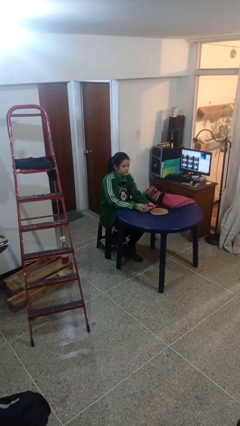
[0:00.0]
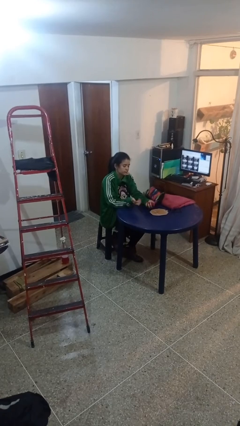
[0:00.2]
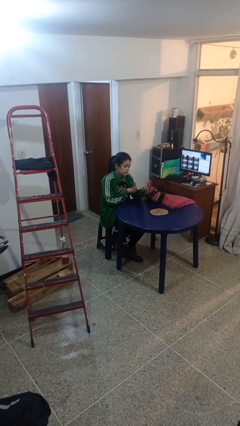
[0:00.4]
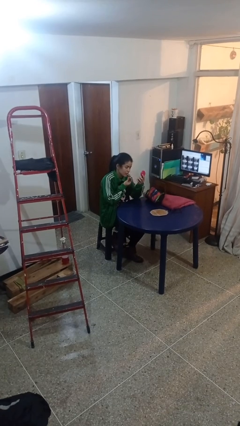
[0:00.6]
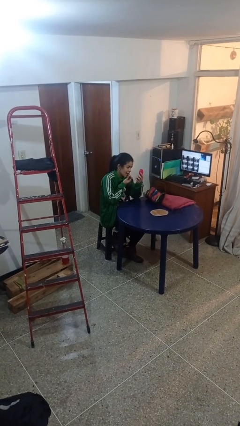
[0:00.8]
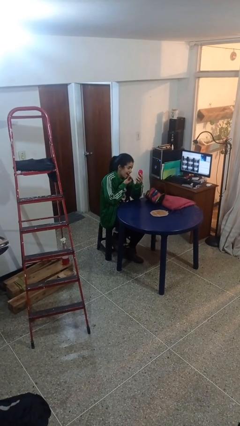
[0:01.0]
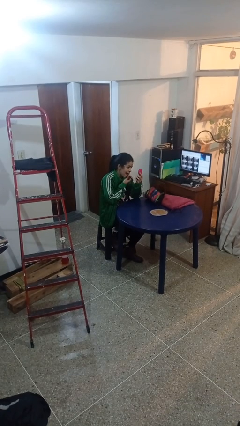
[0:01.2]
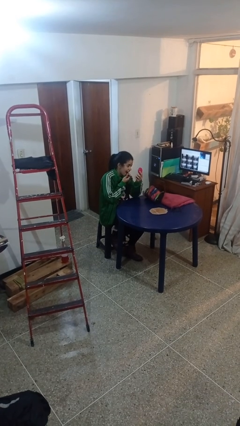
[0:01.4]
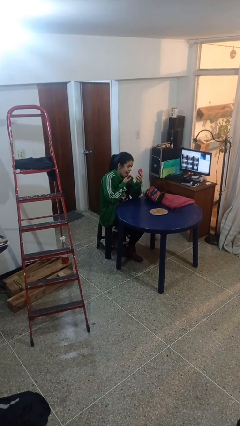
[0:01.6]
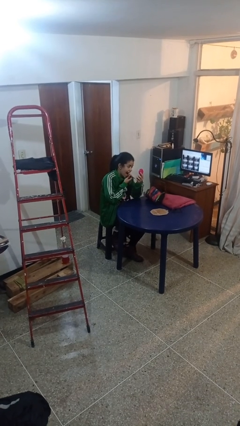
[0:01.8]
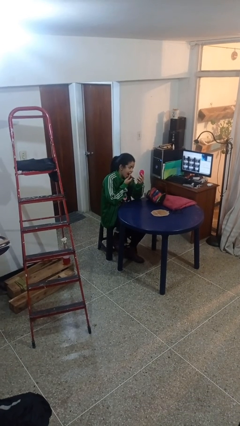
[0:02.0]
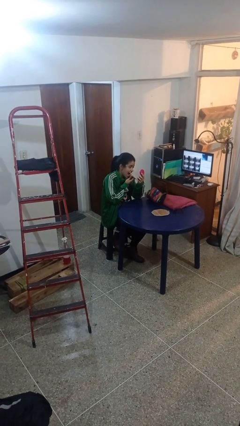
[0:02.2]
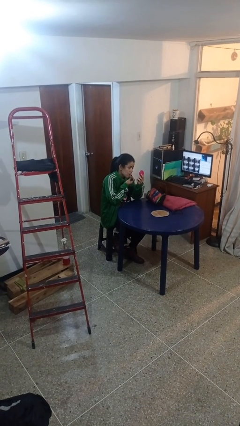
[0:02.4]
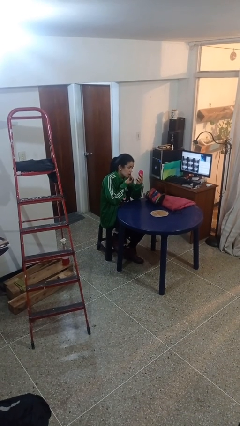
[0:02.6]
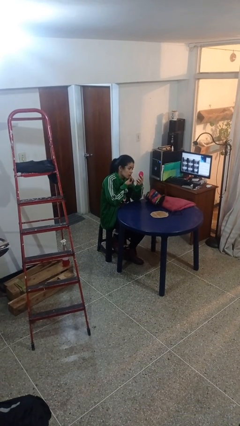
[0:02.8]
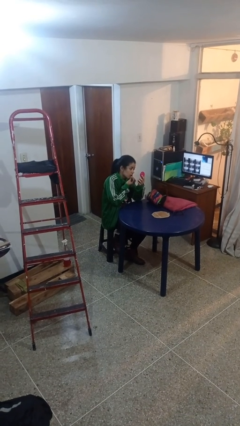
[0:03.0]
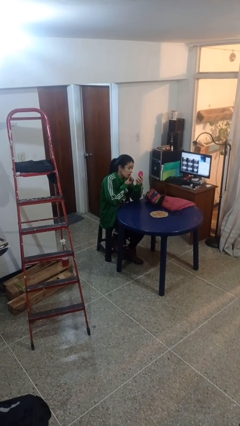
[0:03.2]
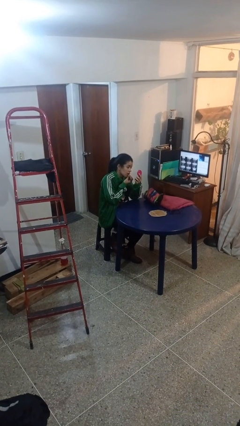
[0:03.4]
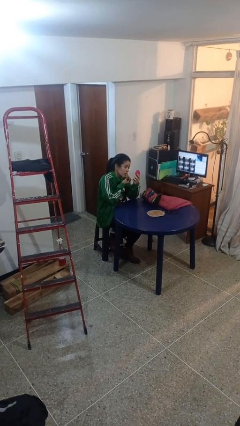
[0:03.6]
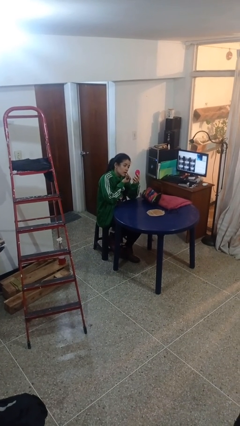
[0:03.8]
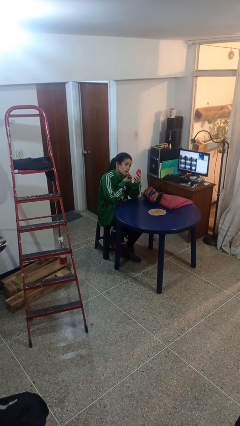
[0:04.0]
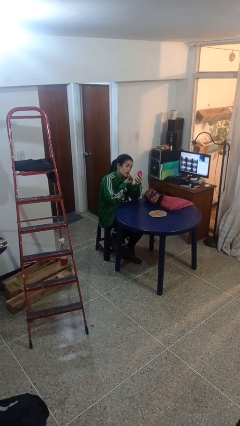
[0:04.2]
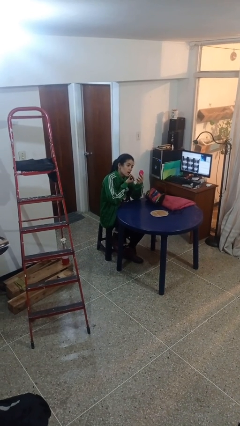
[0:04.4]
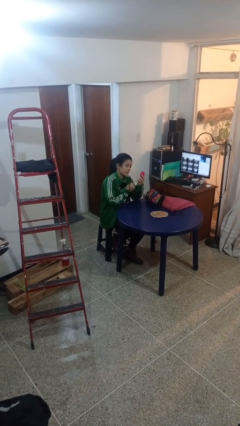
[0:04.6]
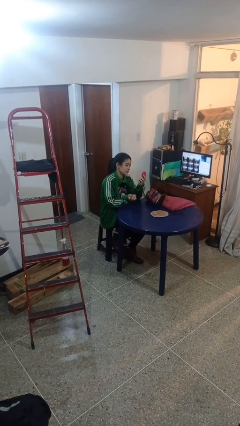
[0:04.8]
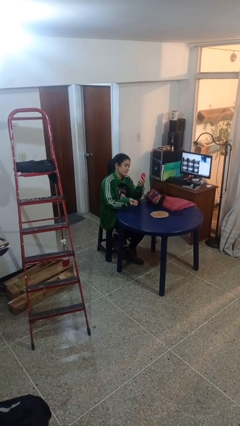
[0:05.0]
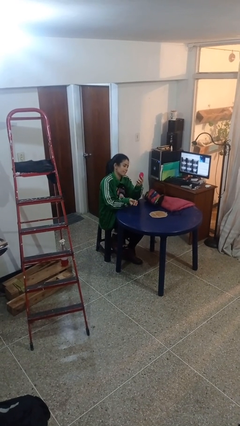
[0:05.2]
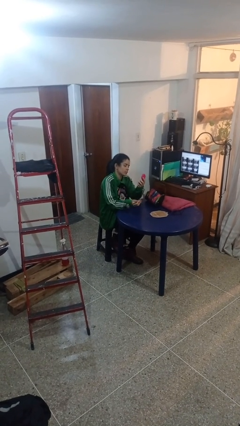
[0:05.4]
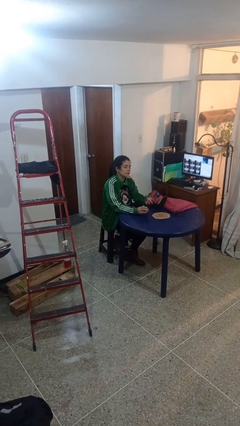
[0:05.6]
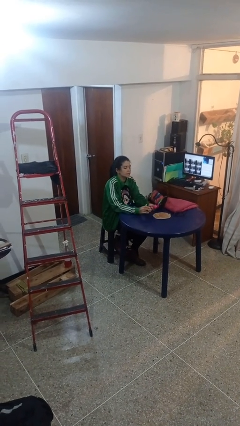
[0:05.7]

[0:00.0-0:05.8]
person applies lip makeup

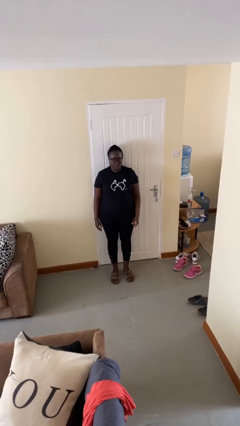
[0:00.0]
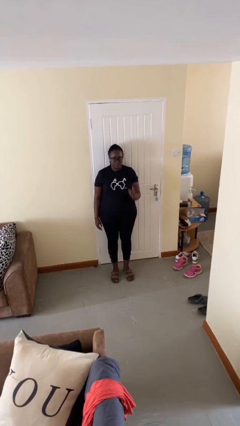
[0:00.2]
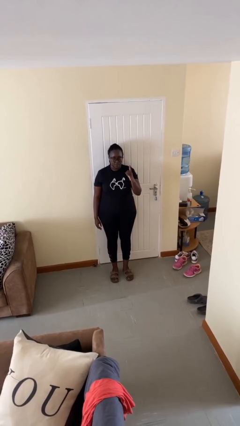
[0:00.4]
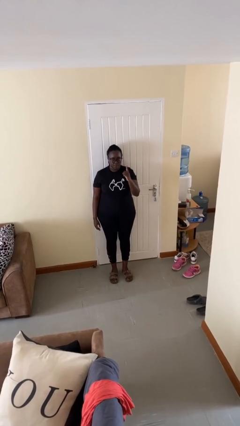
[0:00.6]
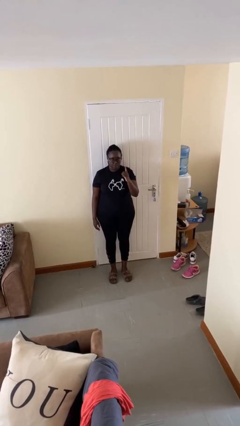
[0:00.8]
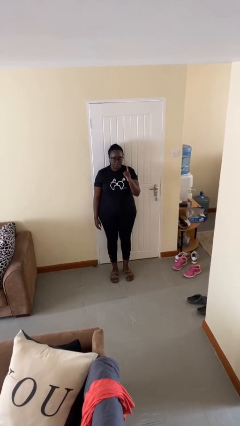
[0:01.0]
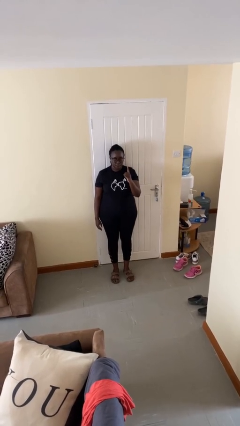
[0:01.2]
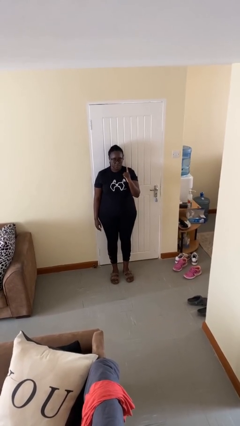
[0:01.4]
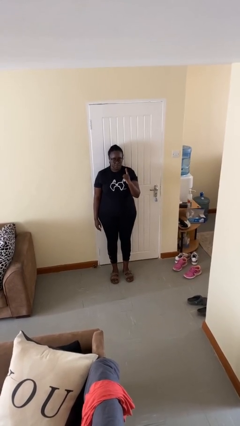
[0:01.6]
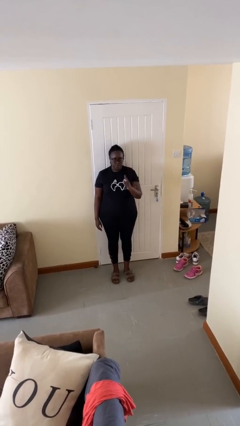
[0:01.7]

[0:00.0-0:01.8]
person gestures number one

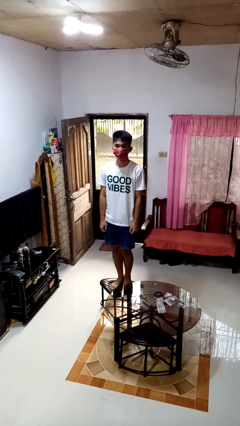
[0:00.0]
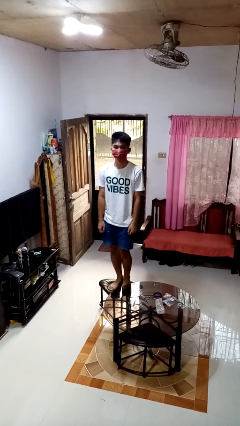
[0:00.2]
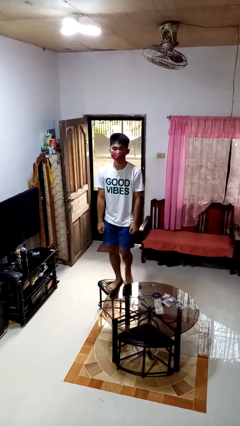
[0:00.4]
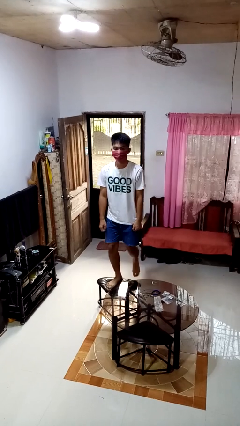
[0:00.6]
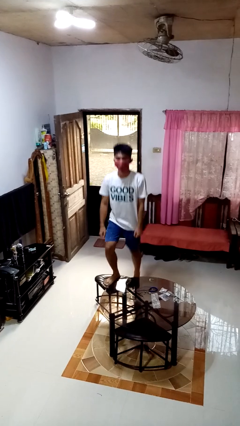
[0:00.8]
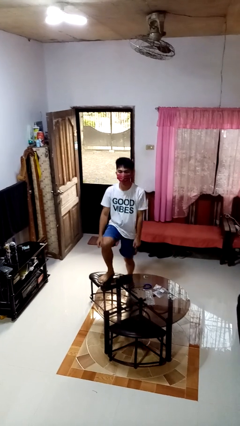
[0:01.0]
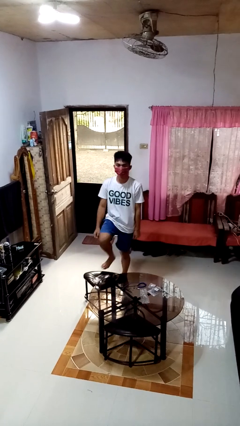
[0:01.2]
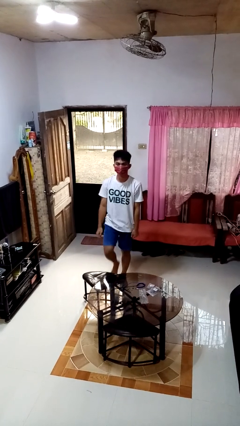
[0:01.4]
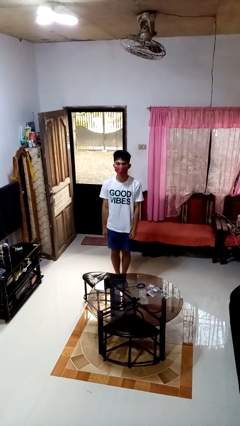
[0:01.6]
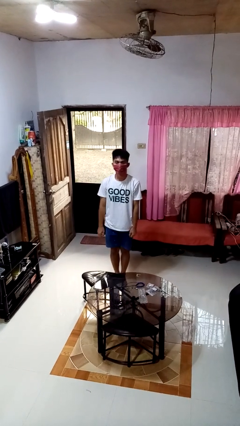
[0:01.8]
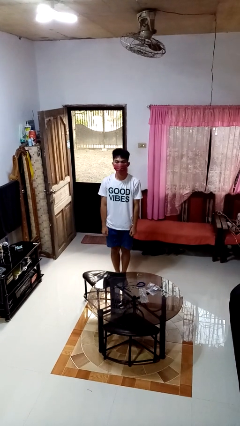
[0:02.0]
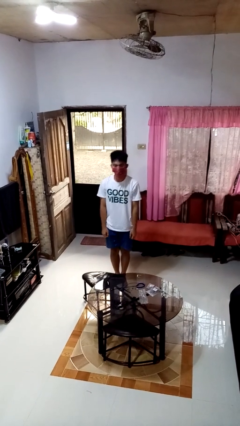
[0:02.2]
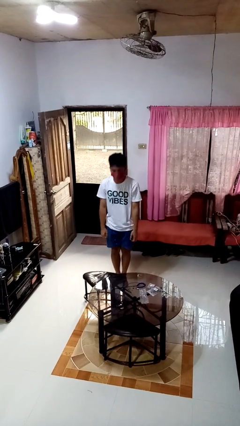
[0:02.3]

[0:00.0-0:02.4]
person climbs off chair

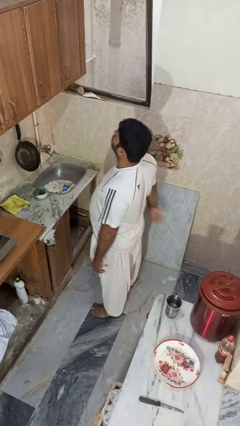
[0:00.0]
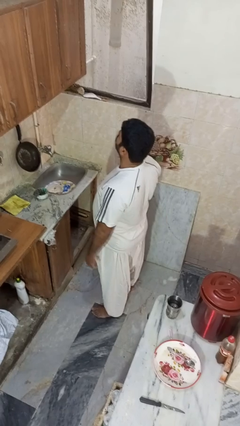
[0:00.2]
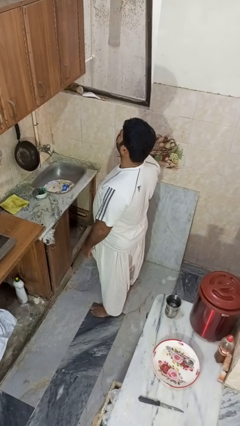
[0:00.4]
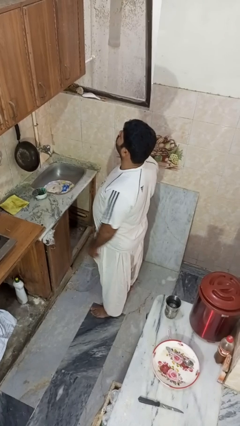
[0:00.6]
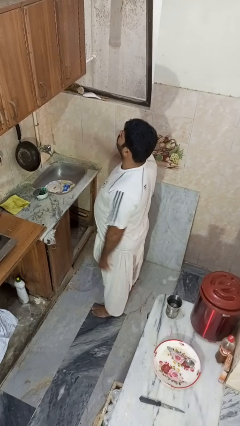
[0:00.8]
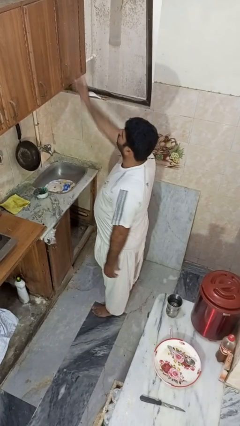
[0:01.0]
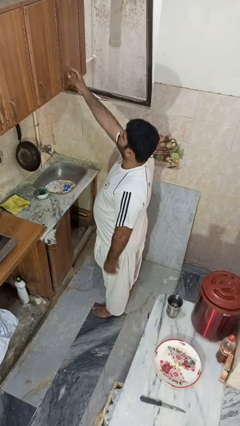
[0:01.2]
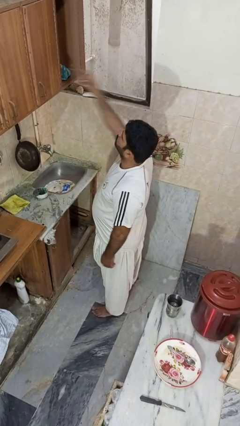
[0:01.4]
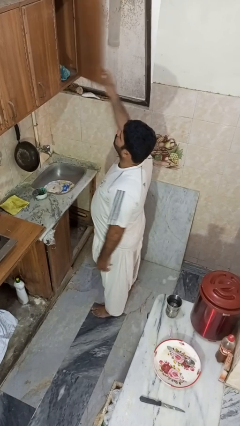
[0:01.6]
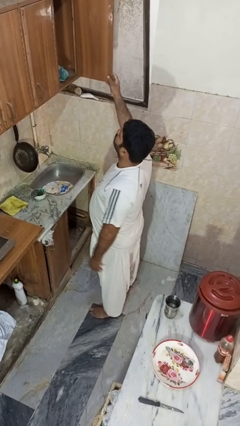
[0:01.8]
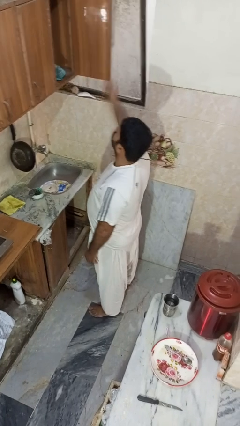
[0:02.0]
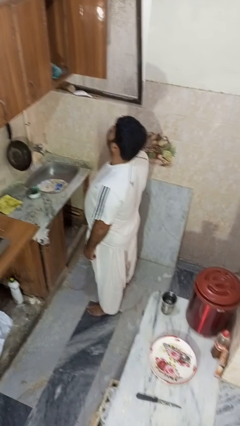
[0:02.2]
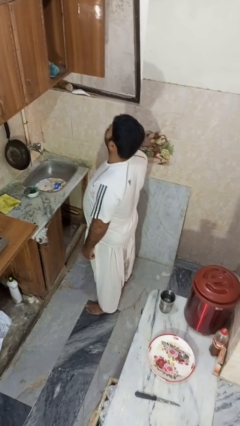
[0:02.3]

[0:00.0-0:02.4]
person opens cabinet

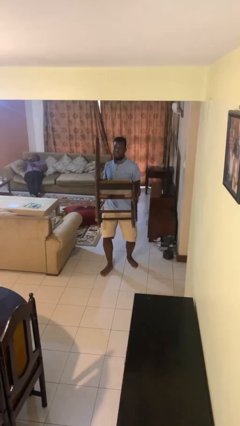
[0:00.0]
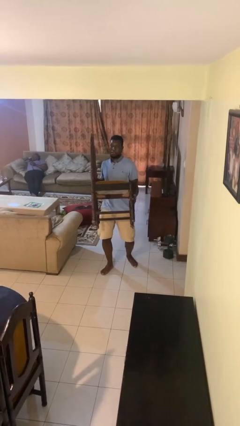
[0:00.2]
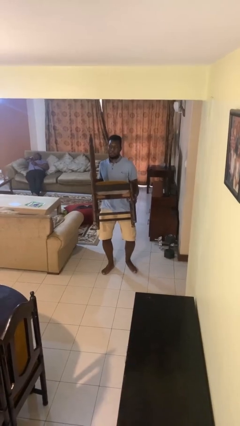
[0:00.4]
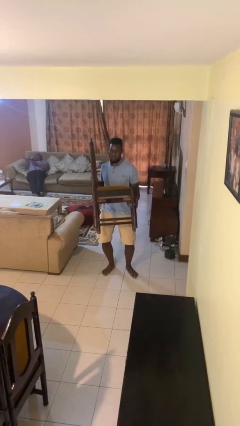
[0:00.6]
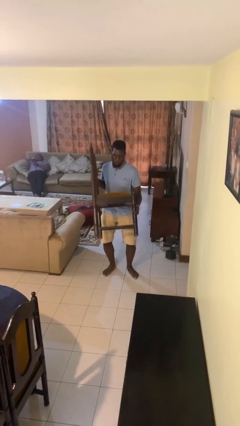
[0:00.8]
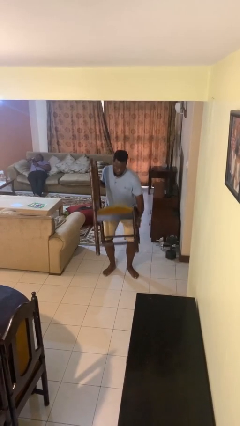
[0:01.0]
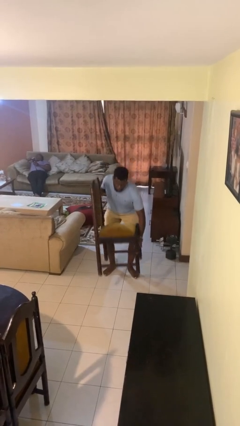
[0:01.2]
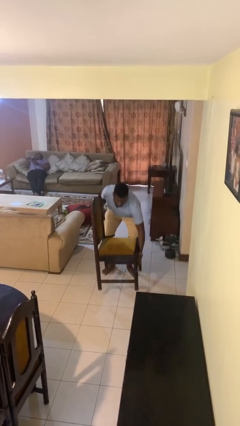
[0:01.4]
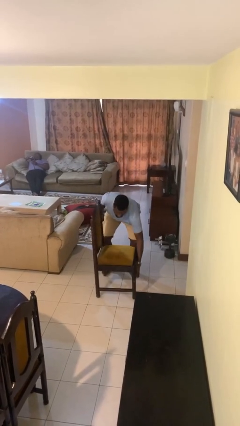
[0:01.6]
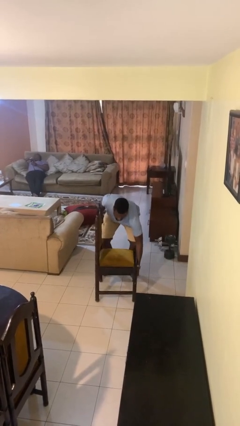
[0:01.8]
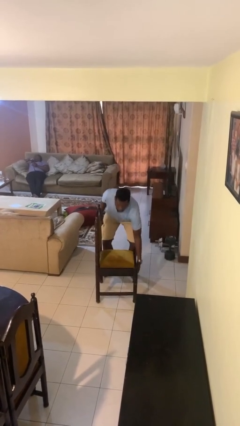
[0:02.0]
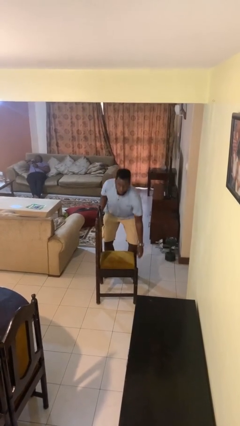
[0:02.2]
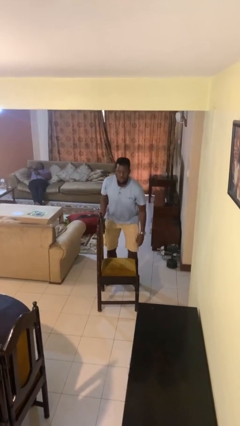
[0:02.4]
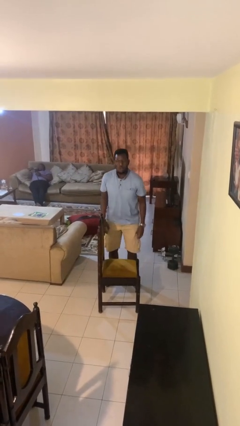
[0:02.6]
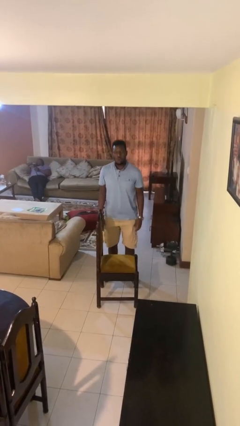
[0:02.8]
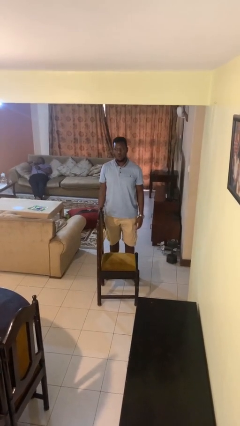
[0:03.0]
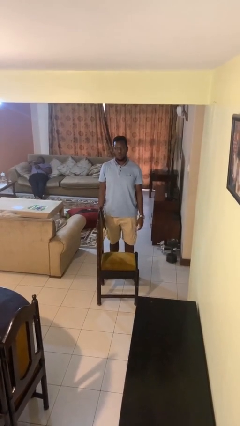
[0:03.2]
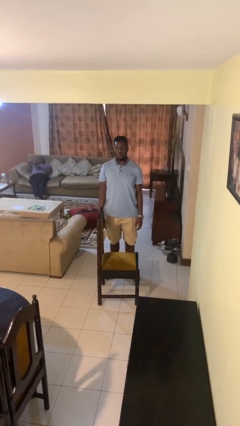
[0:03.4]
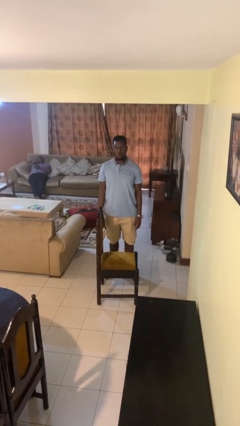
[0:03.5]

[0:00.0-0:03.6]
person puts down object on floor

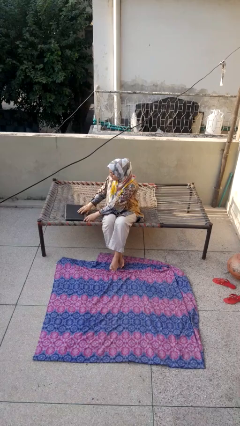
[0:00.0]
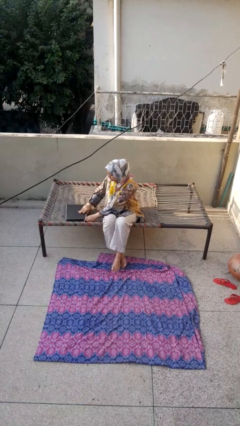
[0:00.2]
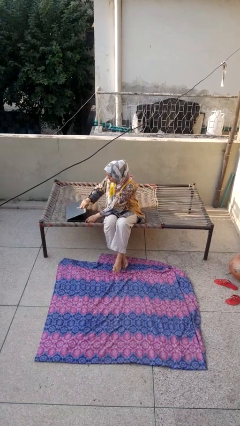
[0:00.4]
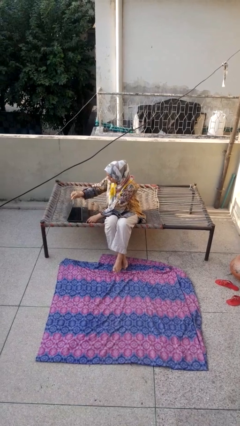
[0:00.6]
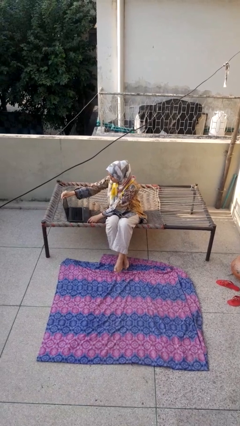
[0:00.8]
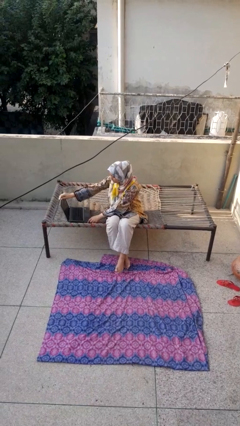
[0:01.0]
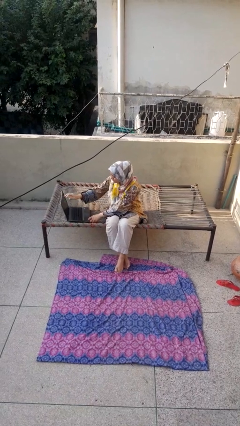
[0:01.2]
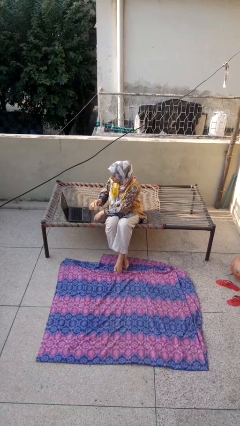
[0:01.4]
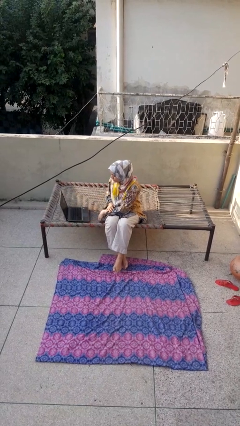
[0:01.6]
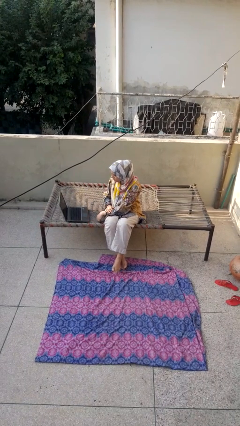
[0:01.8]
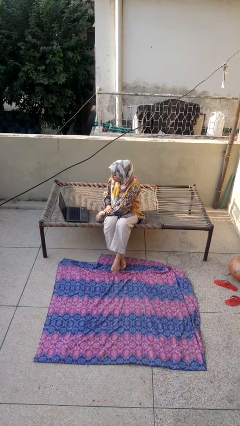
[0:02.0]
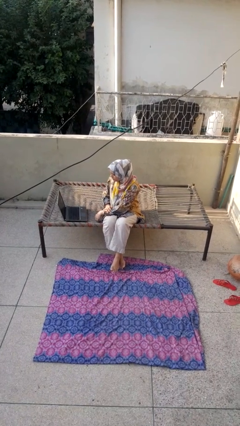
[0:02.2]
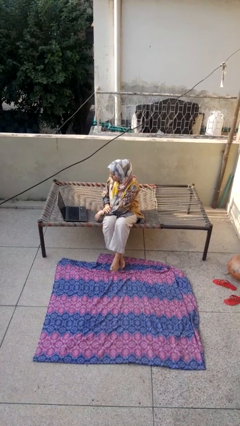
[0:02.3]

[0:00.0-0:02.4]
person opens laptop
